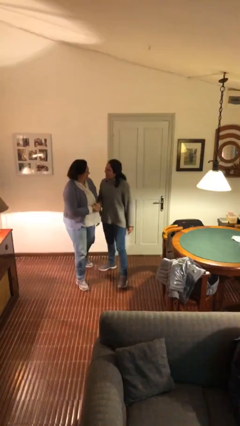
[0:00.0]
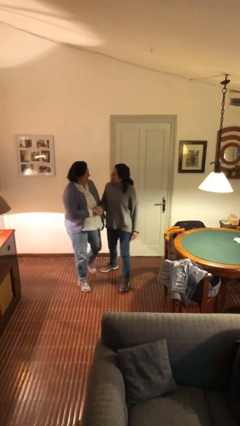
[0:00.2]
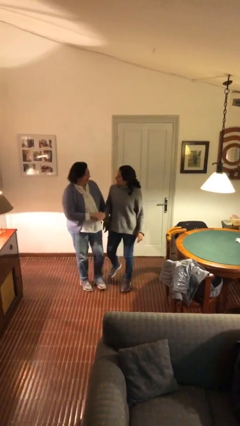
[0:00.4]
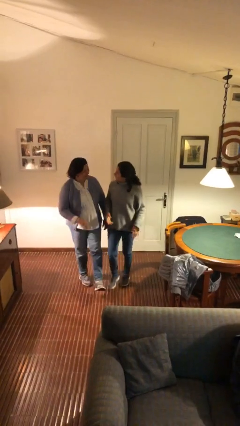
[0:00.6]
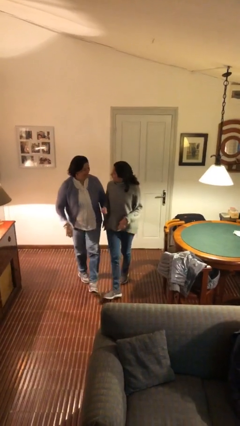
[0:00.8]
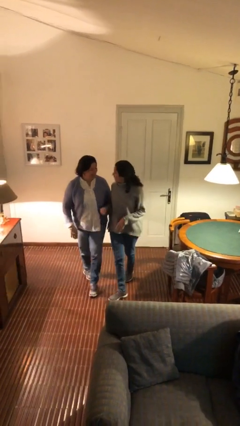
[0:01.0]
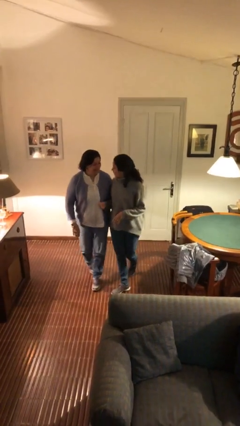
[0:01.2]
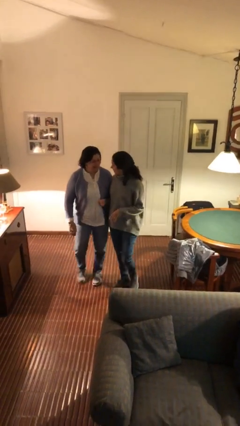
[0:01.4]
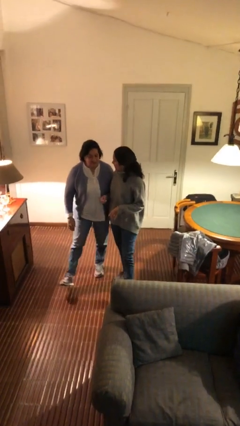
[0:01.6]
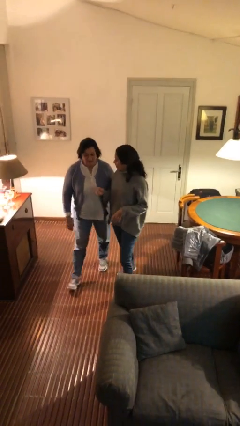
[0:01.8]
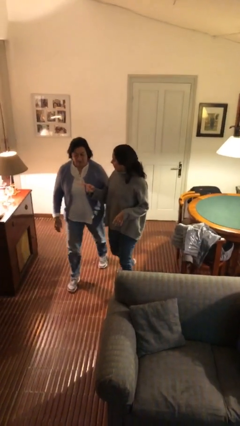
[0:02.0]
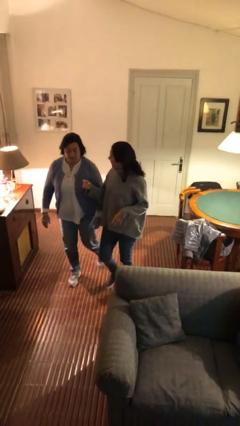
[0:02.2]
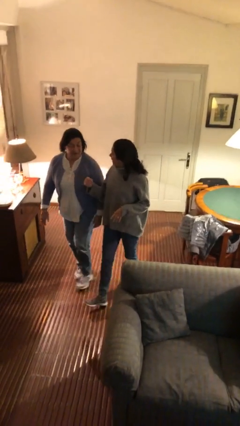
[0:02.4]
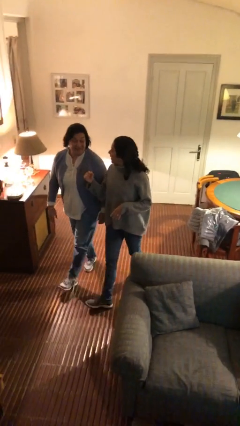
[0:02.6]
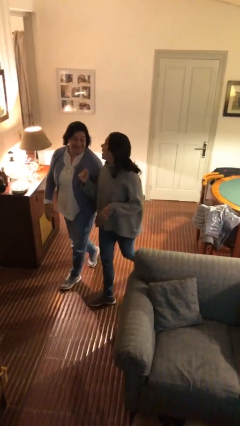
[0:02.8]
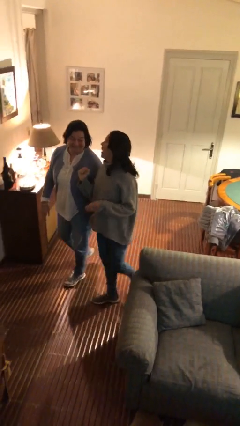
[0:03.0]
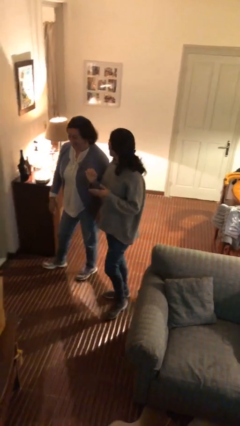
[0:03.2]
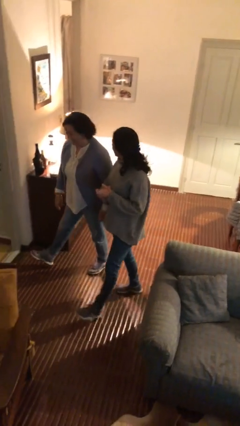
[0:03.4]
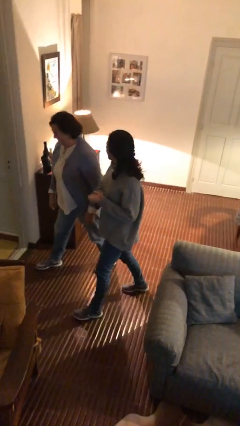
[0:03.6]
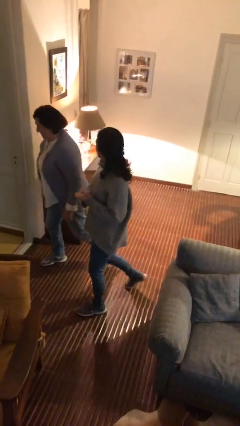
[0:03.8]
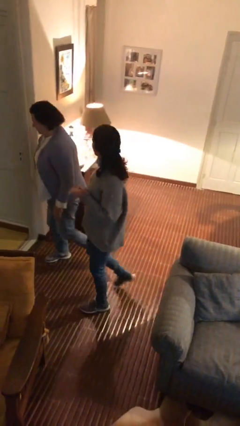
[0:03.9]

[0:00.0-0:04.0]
person talks to person

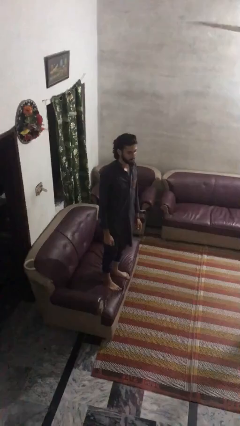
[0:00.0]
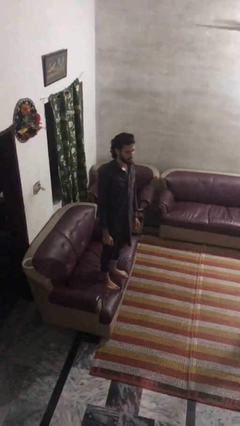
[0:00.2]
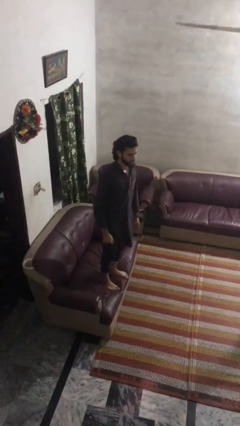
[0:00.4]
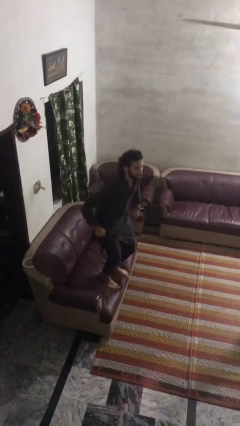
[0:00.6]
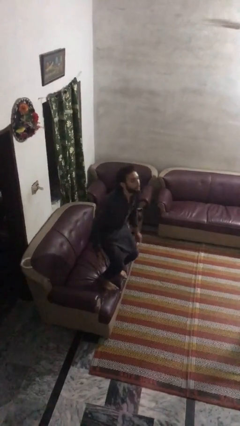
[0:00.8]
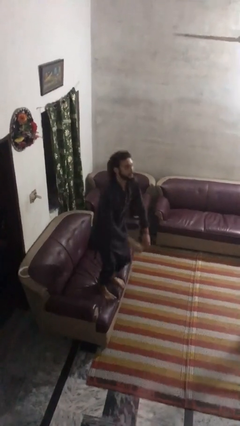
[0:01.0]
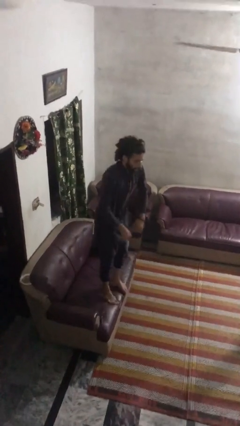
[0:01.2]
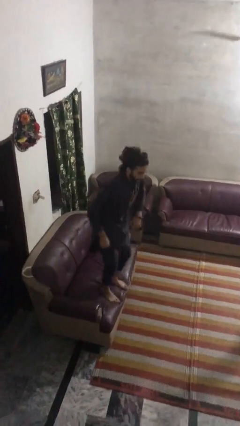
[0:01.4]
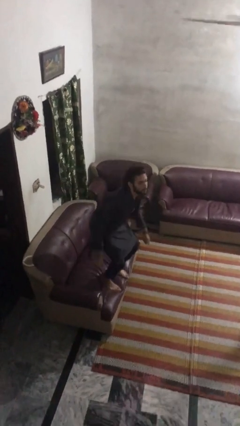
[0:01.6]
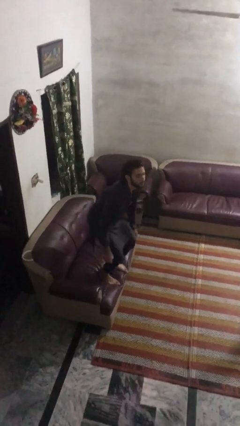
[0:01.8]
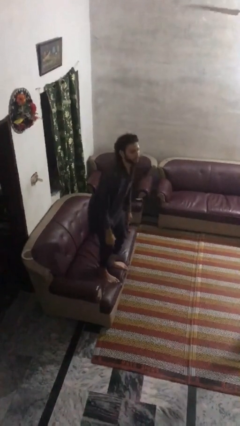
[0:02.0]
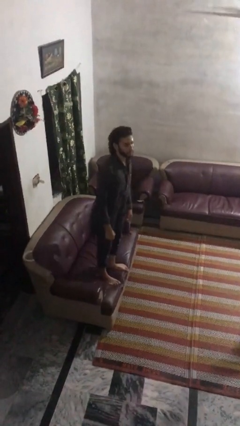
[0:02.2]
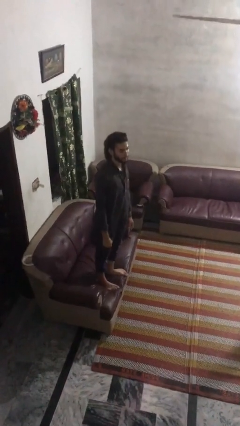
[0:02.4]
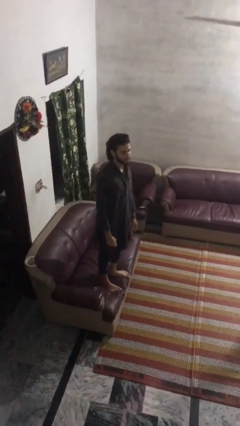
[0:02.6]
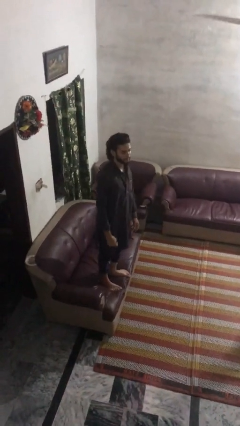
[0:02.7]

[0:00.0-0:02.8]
person jumps on couch

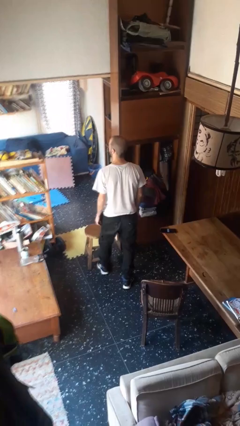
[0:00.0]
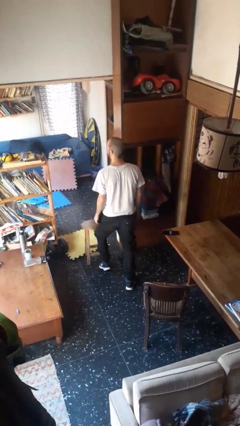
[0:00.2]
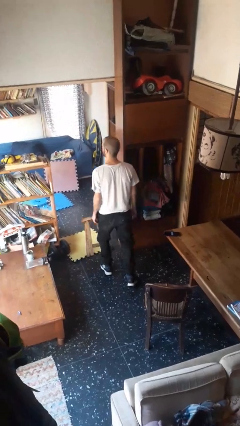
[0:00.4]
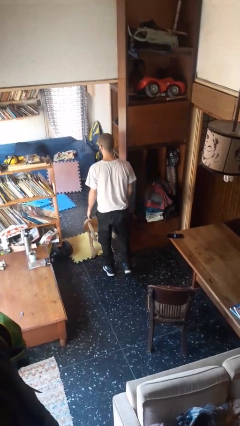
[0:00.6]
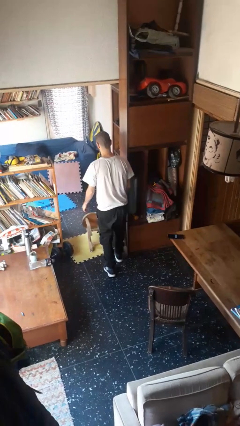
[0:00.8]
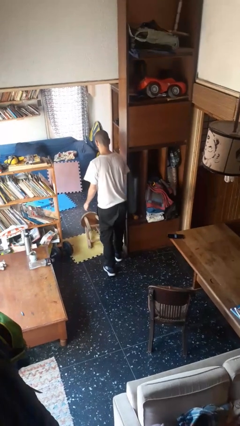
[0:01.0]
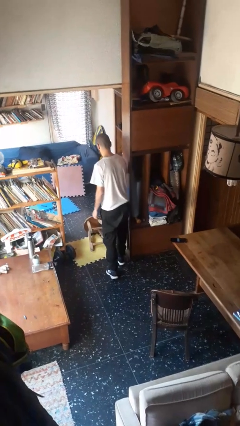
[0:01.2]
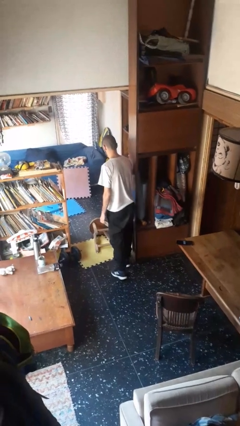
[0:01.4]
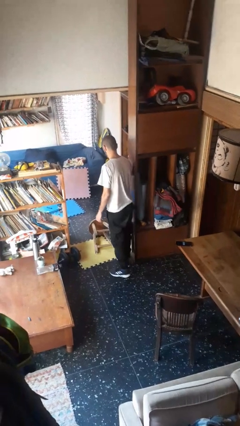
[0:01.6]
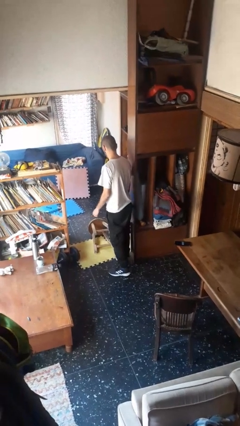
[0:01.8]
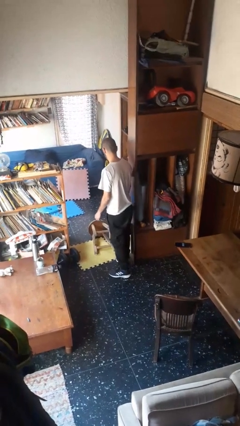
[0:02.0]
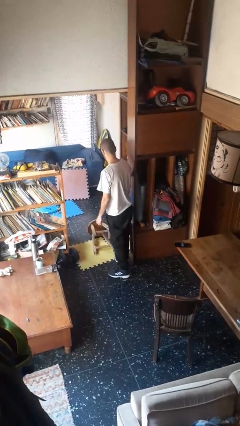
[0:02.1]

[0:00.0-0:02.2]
person knocks over furniture

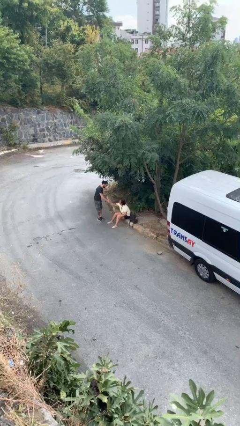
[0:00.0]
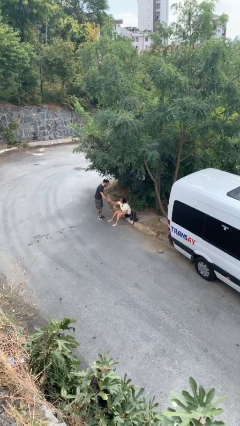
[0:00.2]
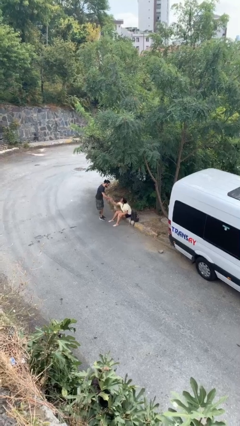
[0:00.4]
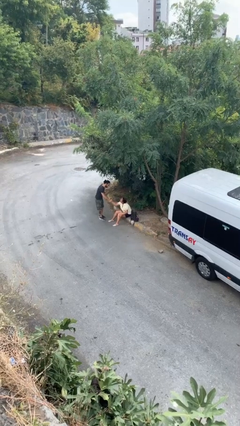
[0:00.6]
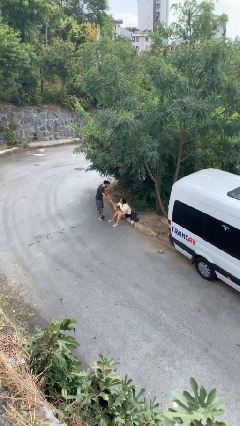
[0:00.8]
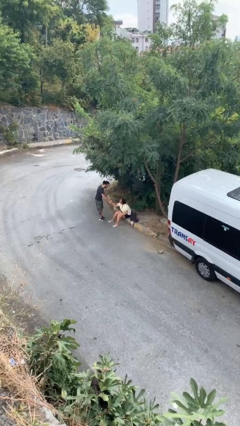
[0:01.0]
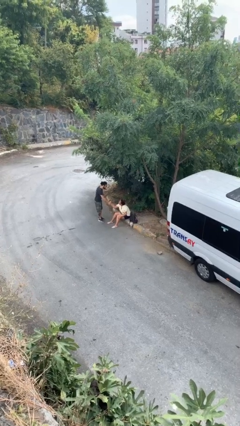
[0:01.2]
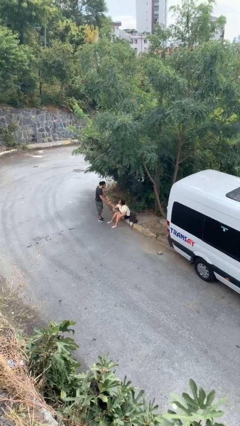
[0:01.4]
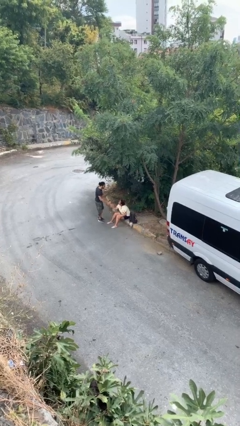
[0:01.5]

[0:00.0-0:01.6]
person shakes hand

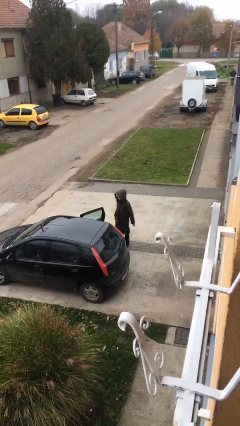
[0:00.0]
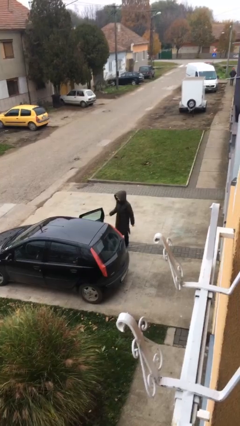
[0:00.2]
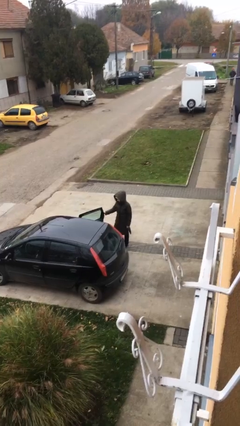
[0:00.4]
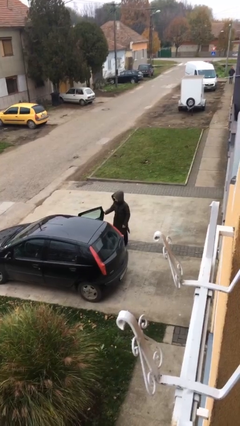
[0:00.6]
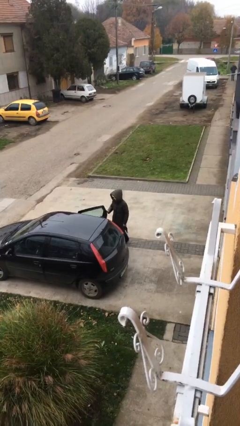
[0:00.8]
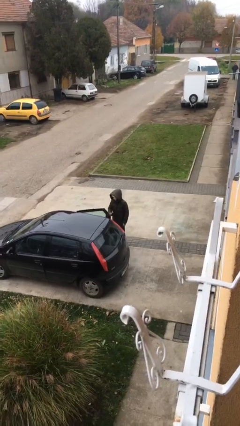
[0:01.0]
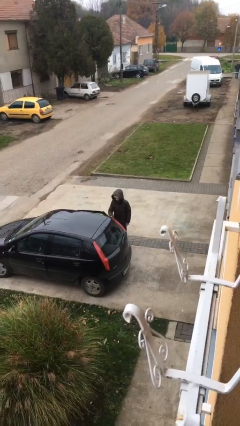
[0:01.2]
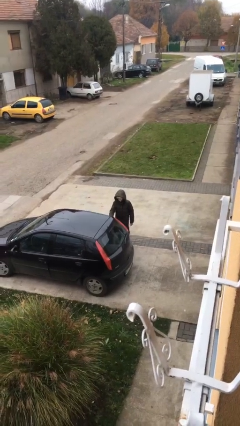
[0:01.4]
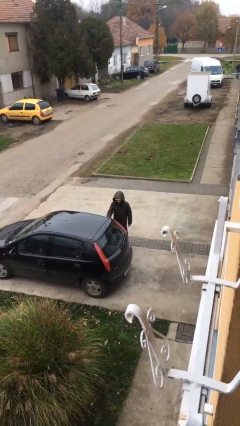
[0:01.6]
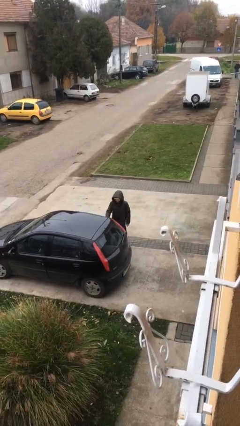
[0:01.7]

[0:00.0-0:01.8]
person closes car door

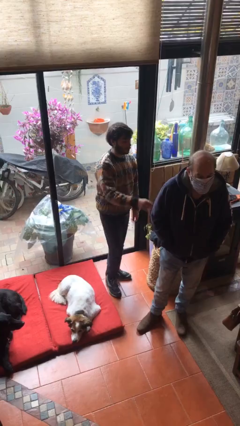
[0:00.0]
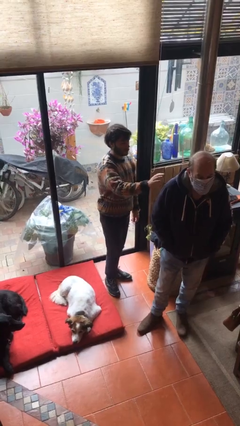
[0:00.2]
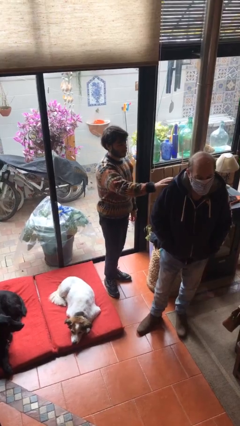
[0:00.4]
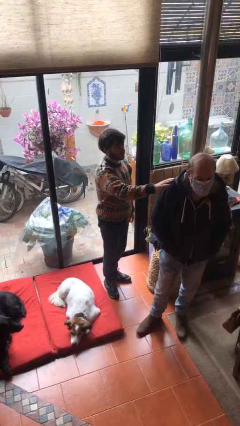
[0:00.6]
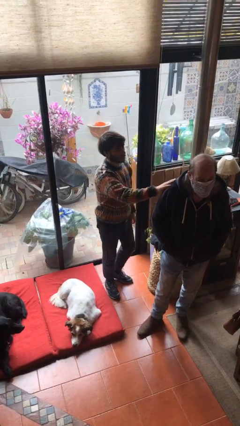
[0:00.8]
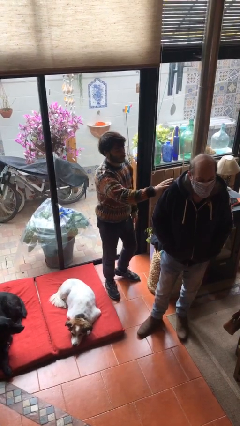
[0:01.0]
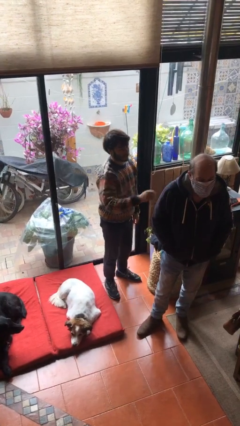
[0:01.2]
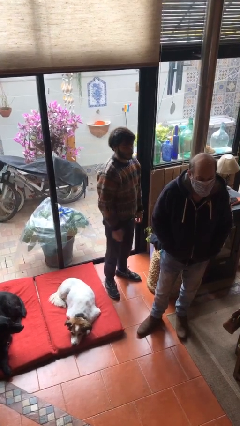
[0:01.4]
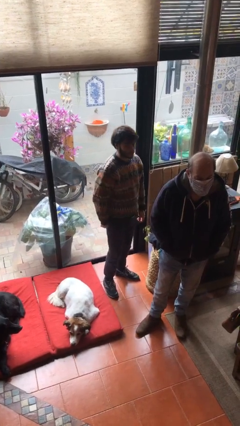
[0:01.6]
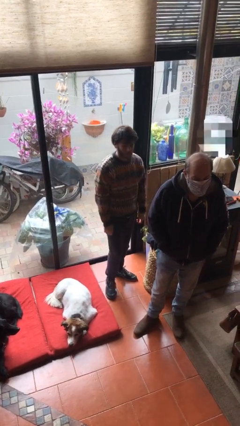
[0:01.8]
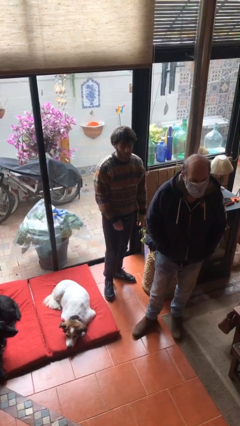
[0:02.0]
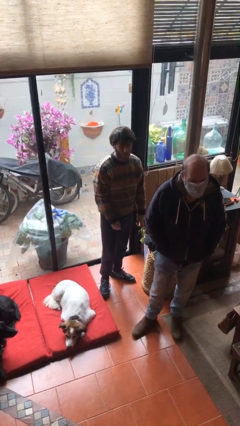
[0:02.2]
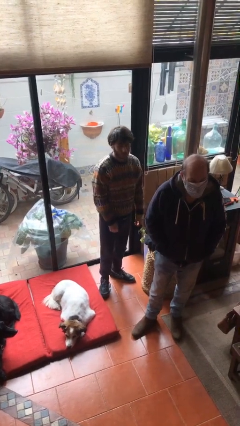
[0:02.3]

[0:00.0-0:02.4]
person touches back of person

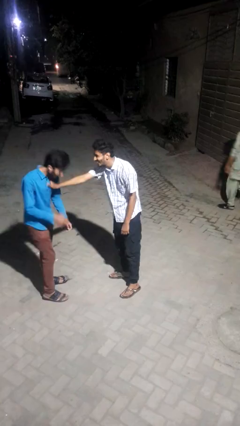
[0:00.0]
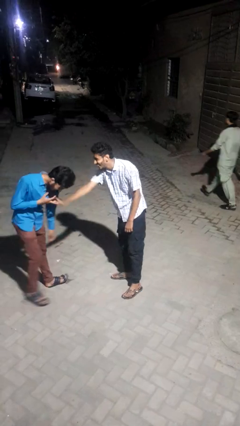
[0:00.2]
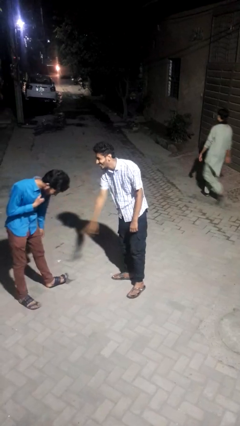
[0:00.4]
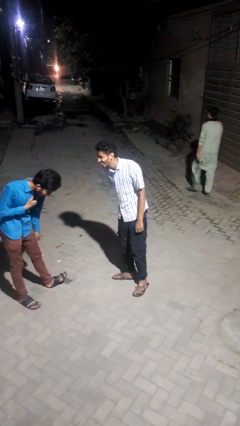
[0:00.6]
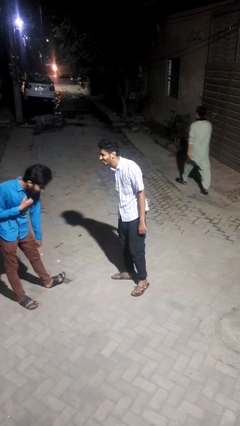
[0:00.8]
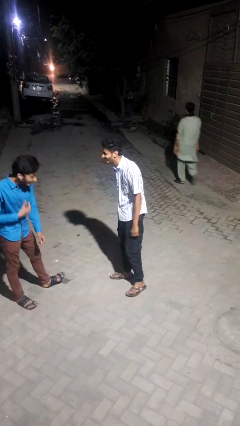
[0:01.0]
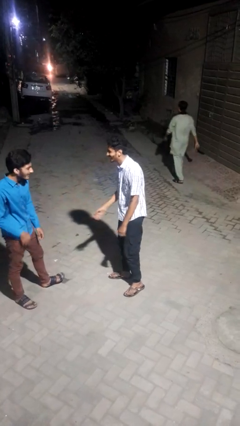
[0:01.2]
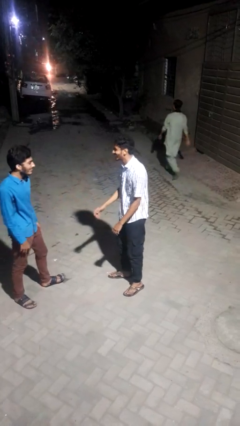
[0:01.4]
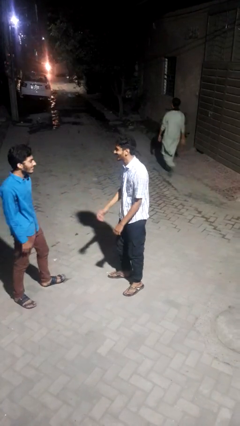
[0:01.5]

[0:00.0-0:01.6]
person shoves person
